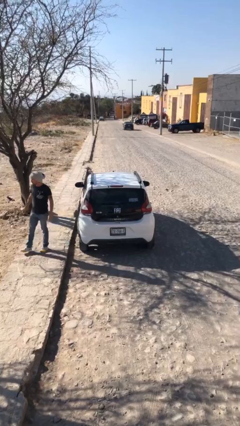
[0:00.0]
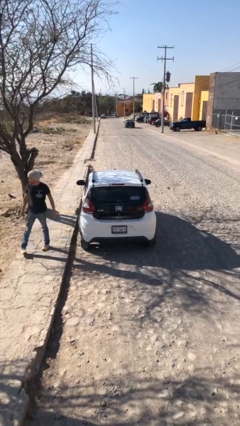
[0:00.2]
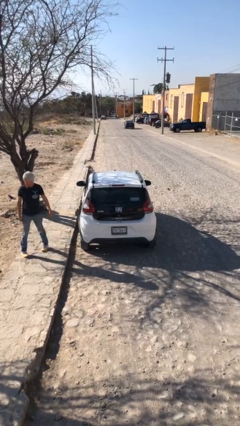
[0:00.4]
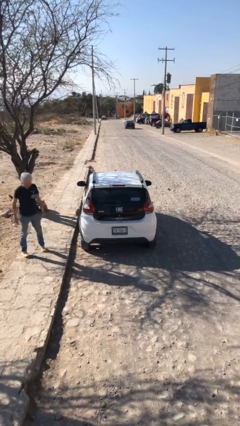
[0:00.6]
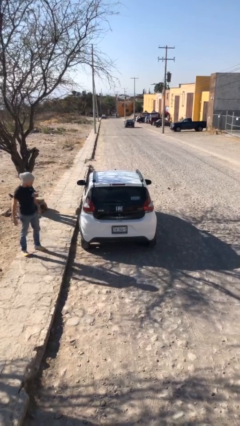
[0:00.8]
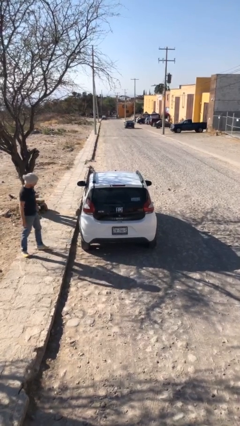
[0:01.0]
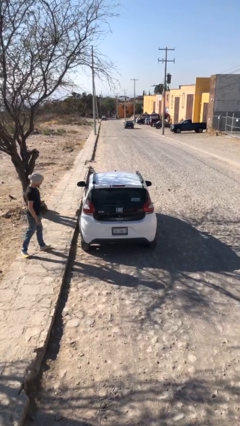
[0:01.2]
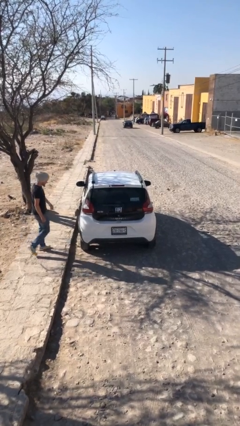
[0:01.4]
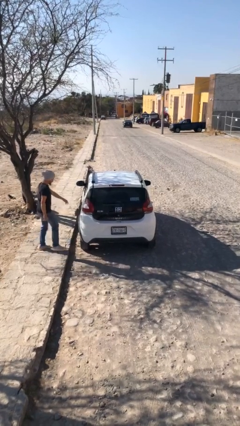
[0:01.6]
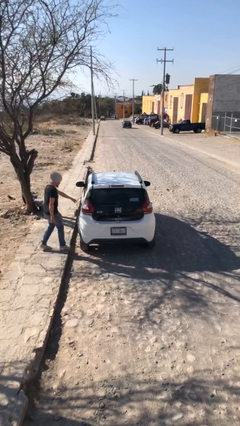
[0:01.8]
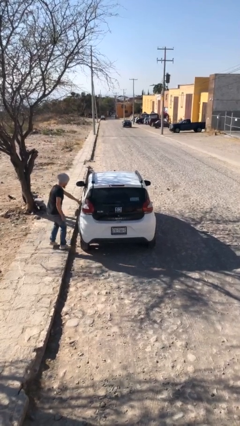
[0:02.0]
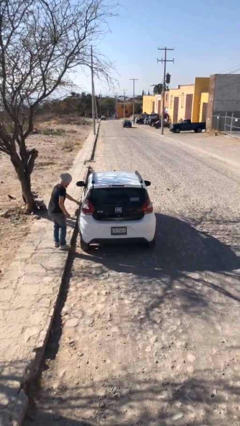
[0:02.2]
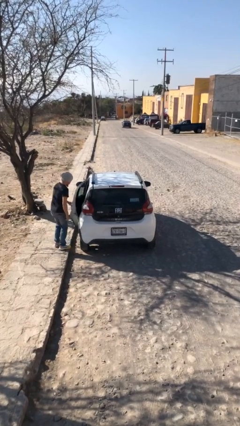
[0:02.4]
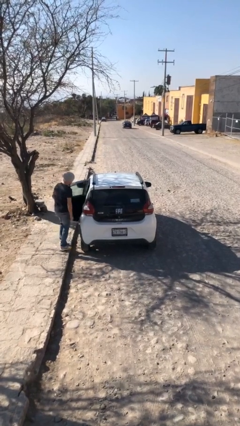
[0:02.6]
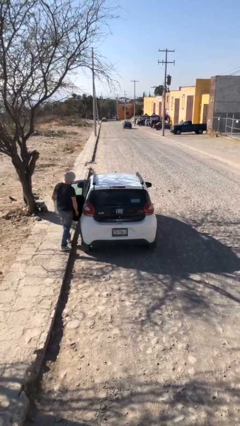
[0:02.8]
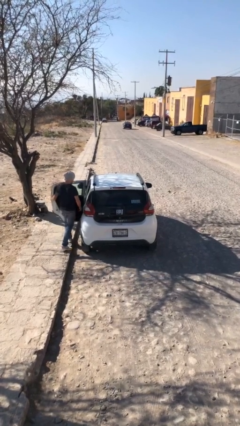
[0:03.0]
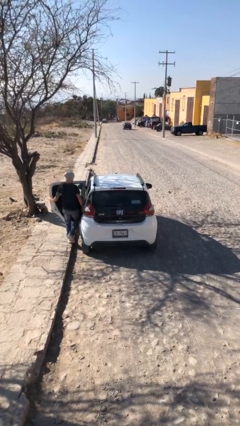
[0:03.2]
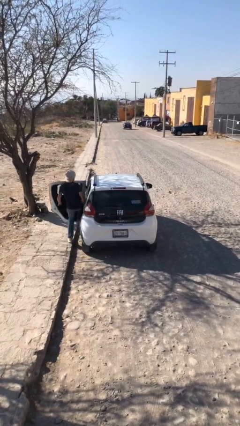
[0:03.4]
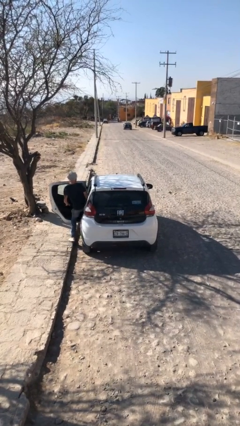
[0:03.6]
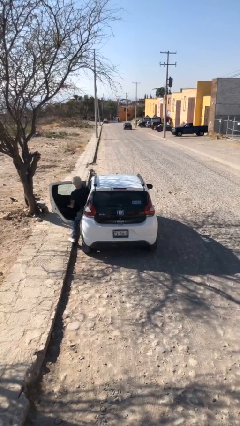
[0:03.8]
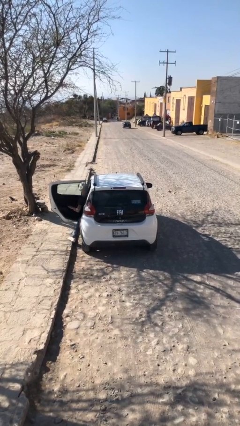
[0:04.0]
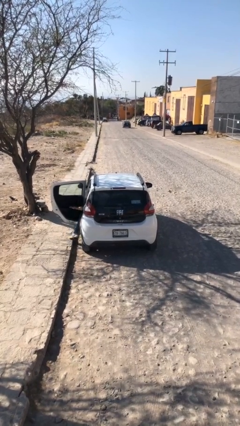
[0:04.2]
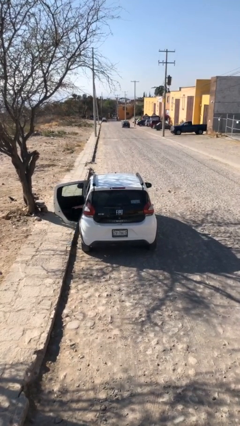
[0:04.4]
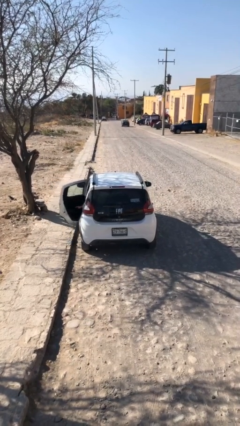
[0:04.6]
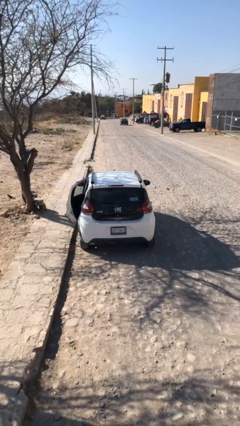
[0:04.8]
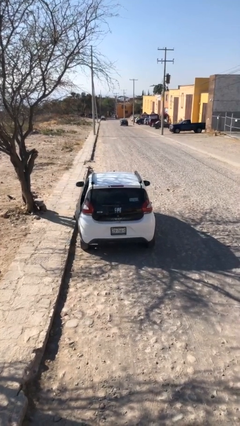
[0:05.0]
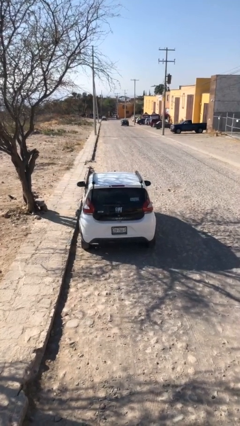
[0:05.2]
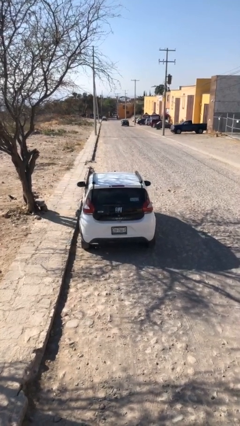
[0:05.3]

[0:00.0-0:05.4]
car picks up person

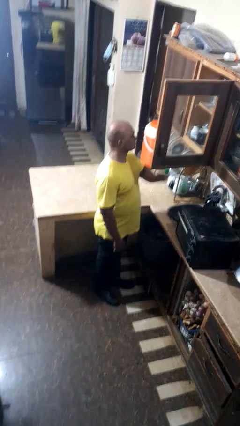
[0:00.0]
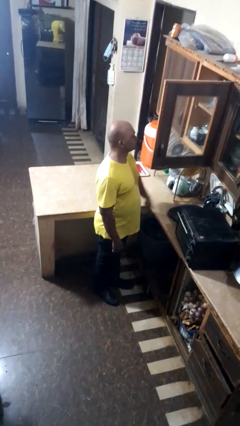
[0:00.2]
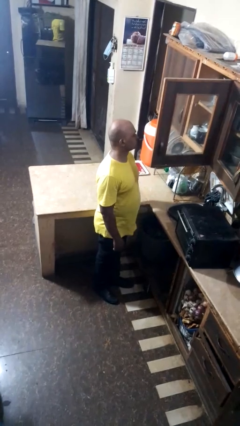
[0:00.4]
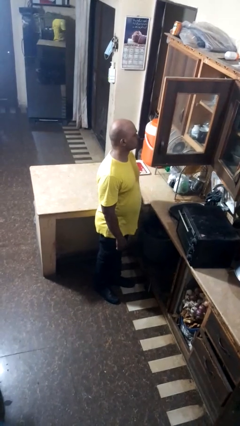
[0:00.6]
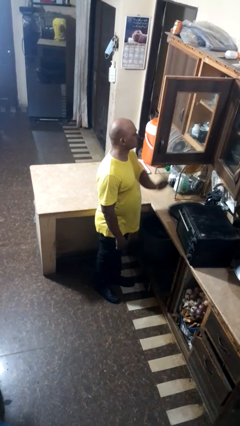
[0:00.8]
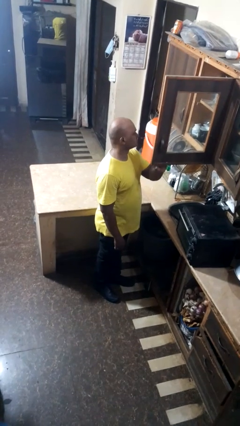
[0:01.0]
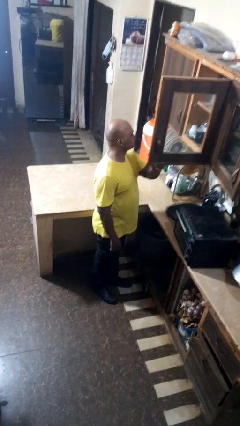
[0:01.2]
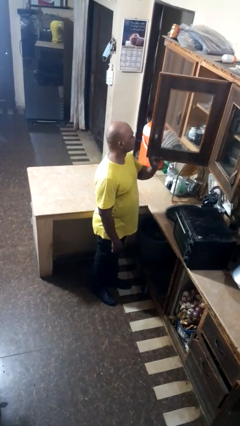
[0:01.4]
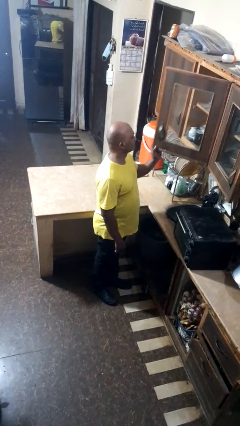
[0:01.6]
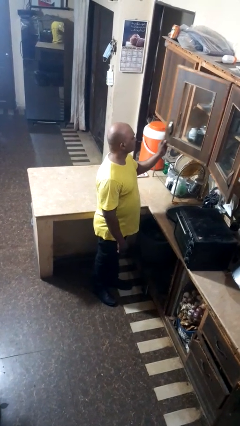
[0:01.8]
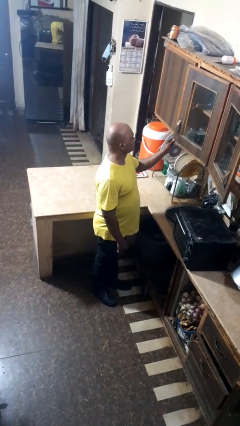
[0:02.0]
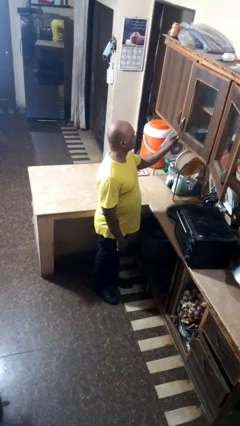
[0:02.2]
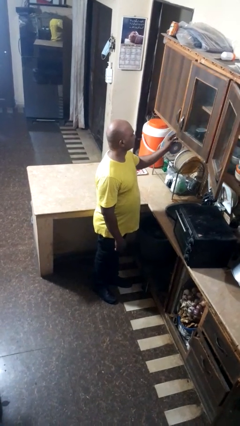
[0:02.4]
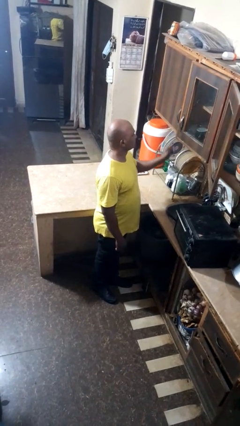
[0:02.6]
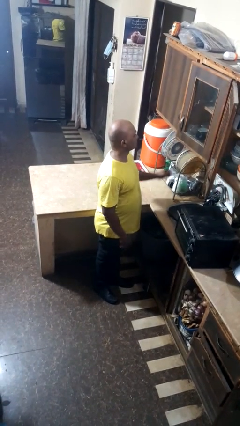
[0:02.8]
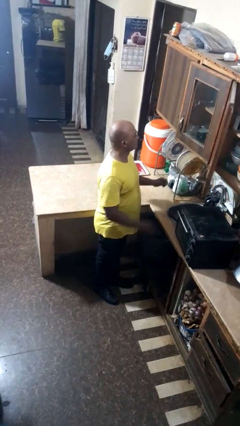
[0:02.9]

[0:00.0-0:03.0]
person closes cabinet

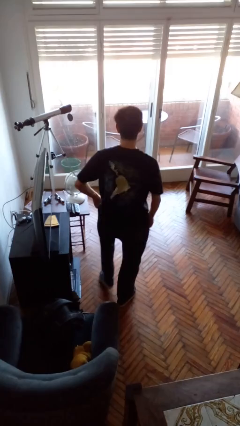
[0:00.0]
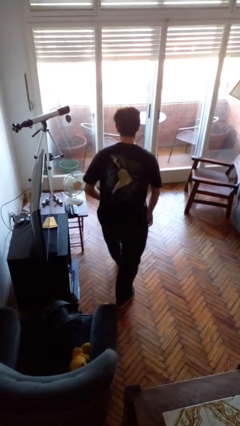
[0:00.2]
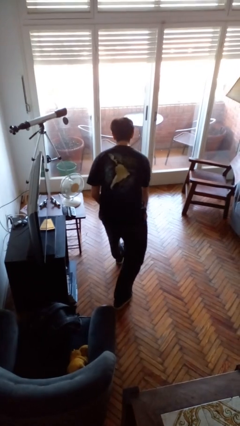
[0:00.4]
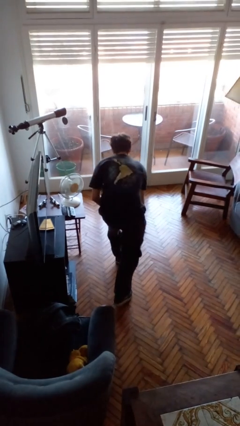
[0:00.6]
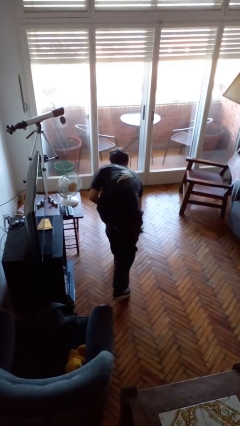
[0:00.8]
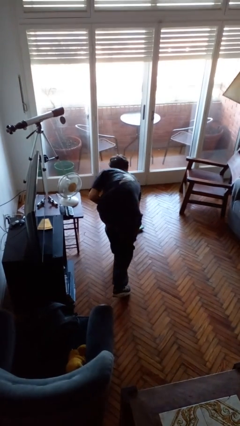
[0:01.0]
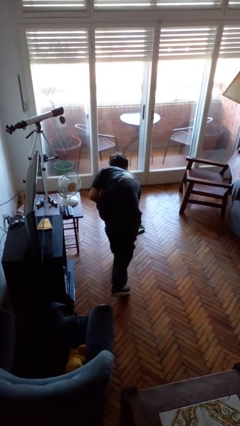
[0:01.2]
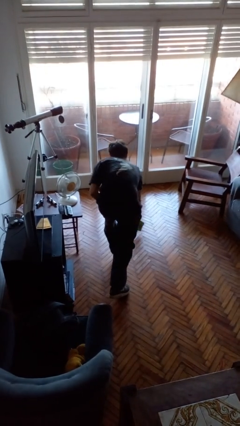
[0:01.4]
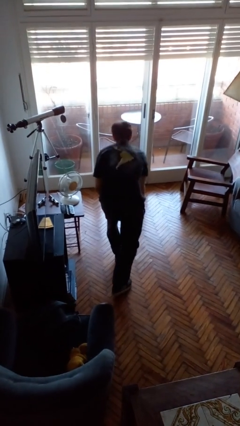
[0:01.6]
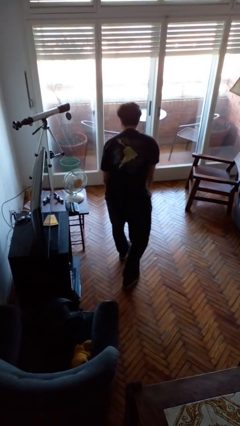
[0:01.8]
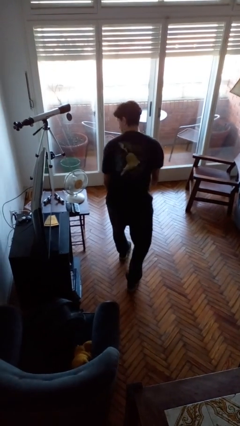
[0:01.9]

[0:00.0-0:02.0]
person picks up object from floor

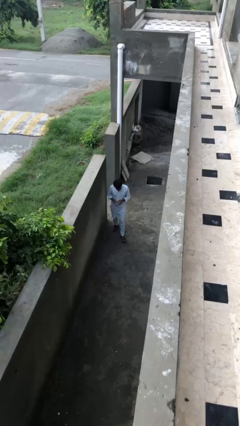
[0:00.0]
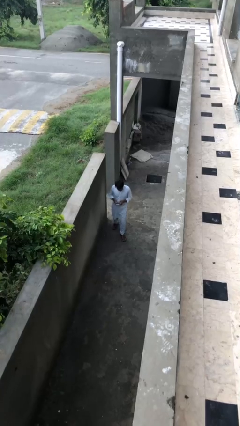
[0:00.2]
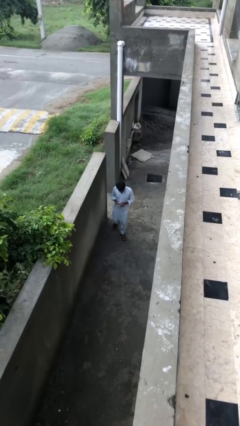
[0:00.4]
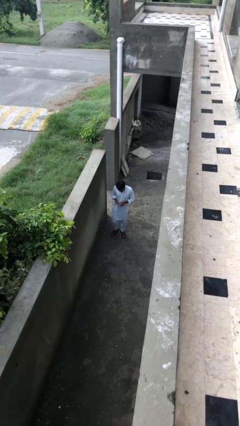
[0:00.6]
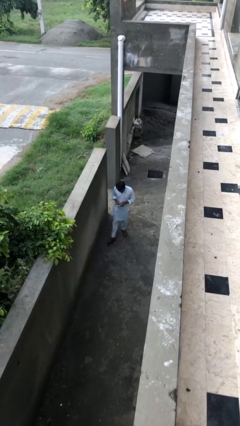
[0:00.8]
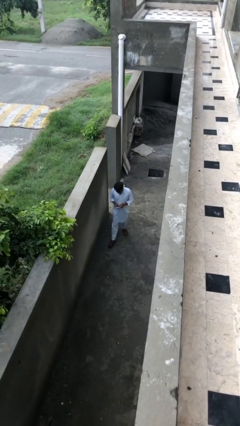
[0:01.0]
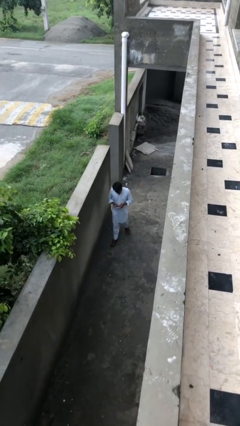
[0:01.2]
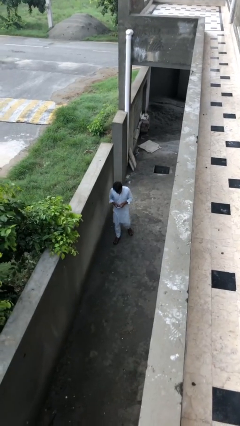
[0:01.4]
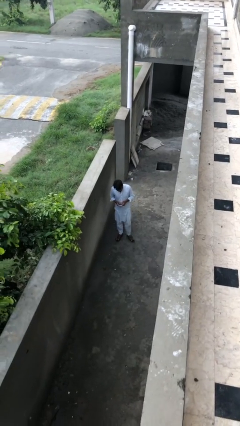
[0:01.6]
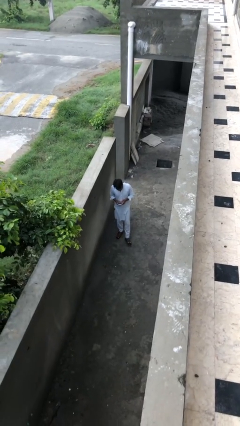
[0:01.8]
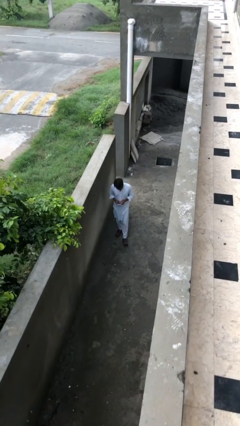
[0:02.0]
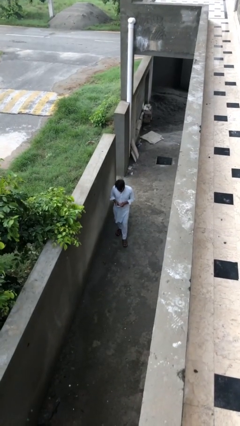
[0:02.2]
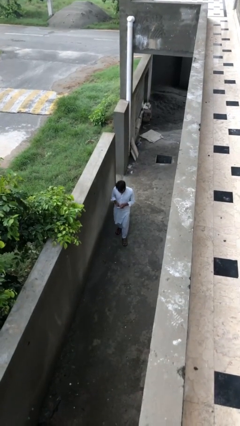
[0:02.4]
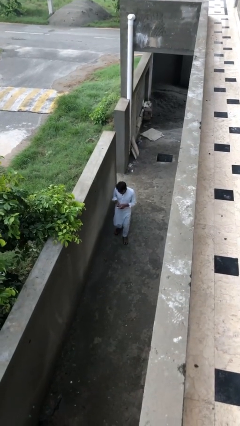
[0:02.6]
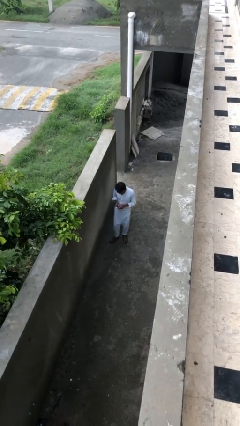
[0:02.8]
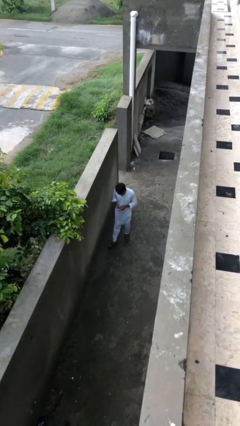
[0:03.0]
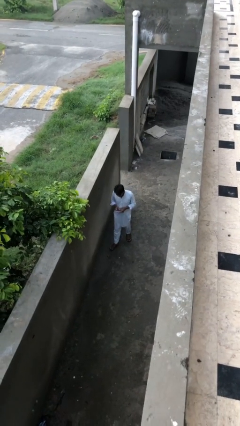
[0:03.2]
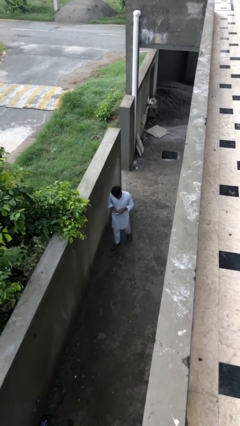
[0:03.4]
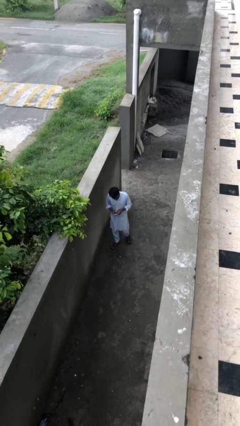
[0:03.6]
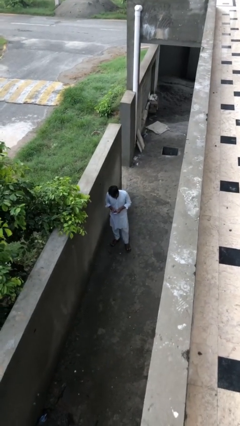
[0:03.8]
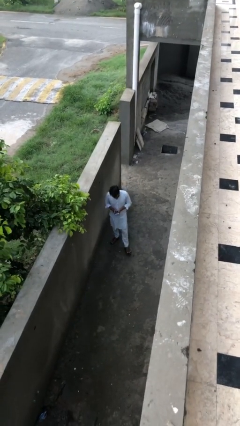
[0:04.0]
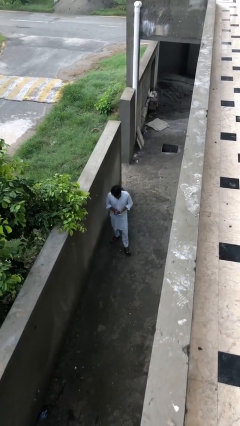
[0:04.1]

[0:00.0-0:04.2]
person texts on phone

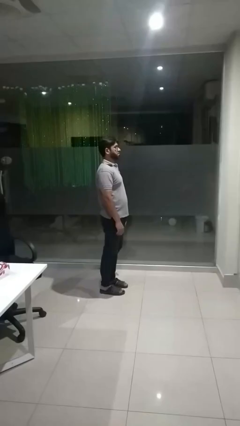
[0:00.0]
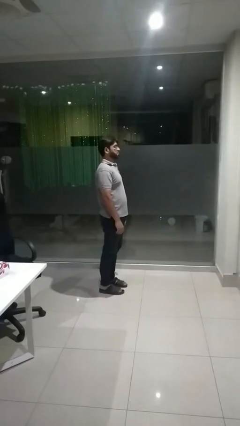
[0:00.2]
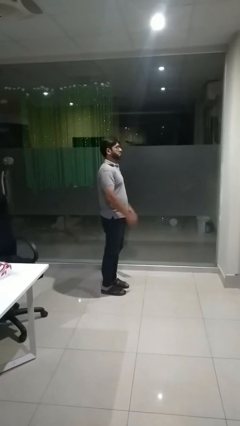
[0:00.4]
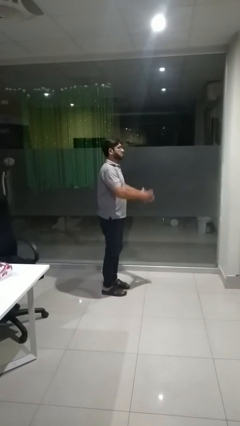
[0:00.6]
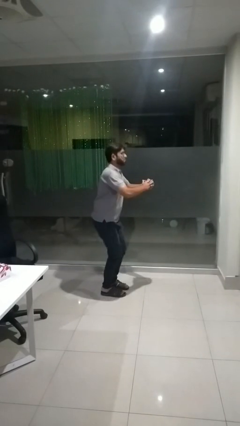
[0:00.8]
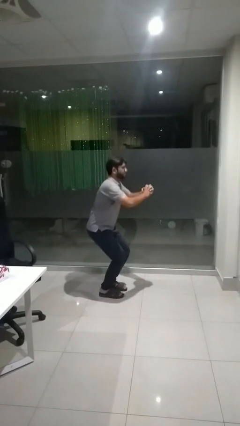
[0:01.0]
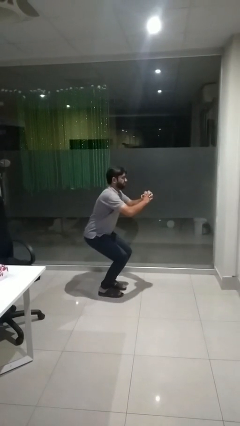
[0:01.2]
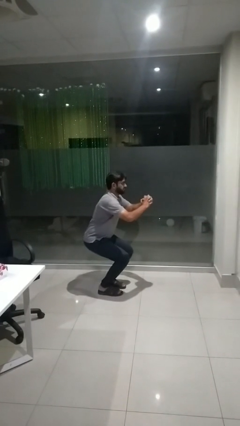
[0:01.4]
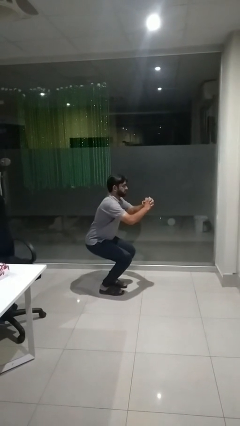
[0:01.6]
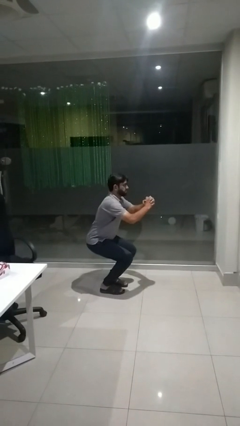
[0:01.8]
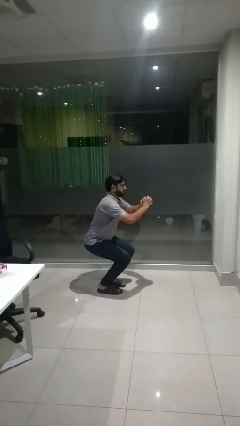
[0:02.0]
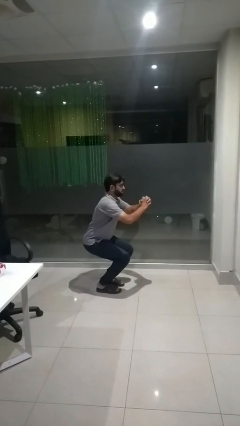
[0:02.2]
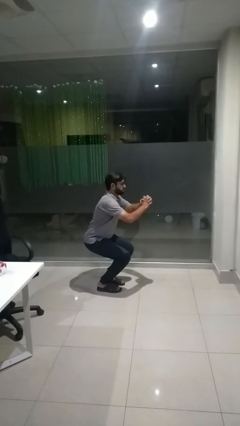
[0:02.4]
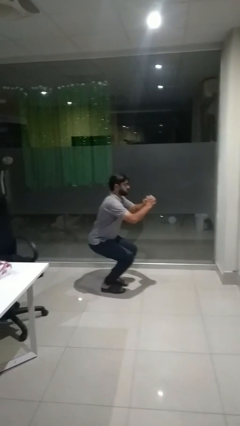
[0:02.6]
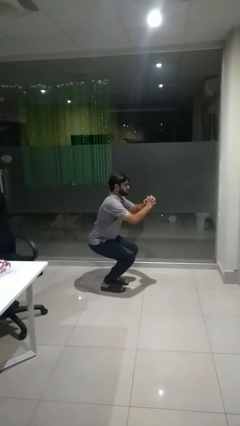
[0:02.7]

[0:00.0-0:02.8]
person squats
